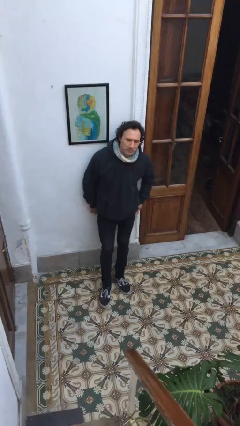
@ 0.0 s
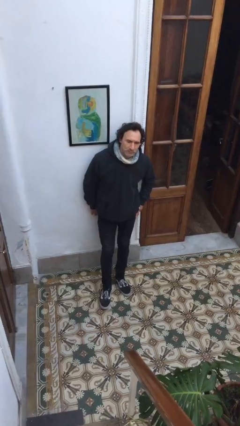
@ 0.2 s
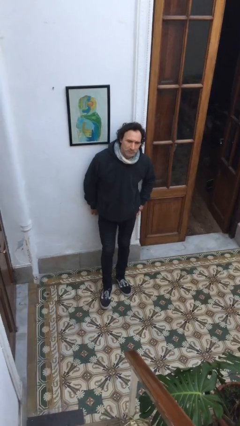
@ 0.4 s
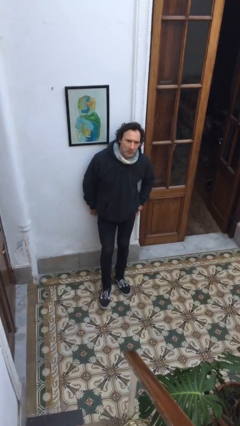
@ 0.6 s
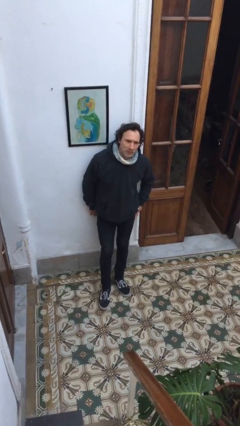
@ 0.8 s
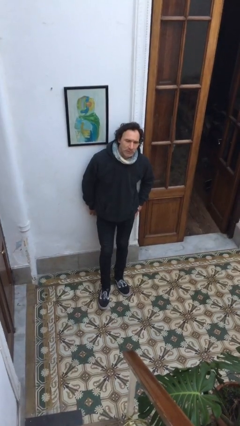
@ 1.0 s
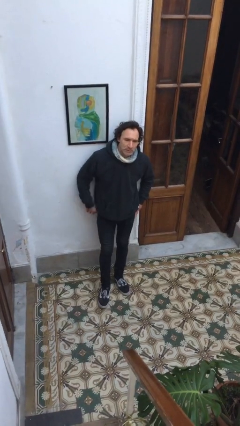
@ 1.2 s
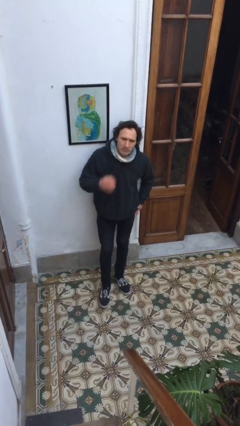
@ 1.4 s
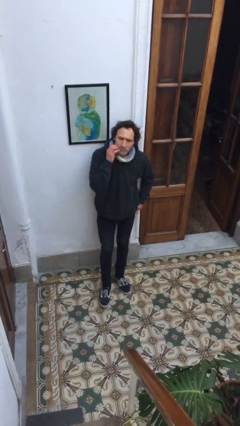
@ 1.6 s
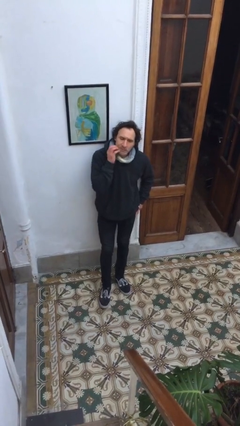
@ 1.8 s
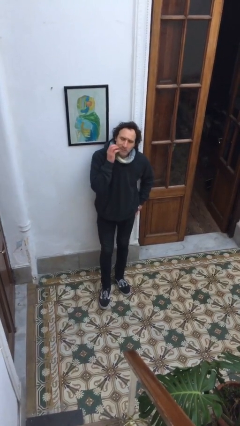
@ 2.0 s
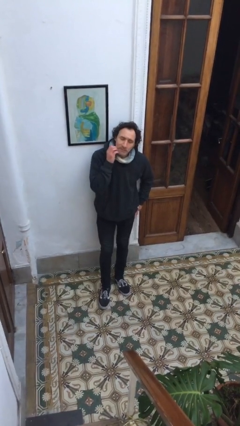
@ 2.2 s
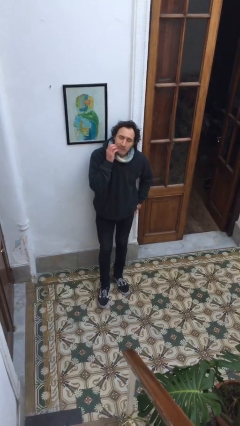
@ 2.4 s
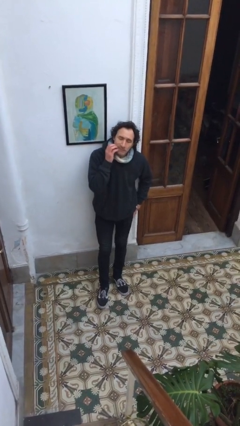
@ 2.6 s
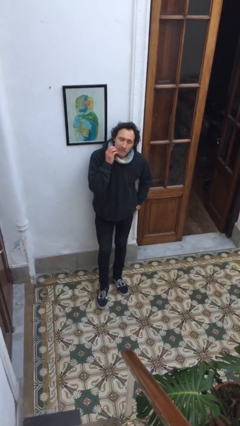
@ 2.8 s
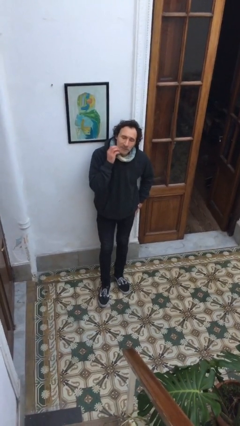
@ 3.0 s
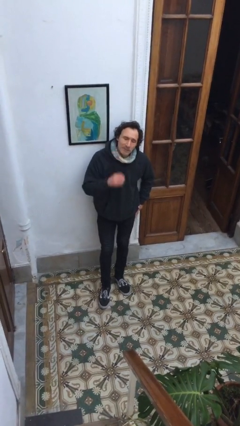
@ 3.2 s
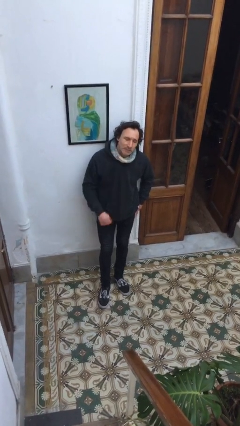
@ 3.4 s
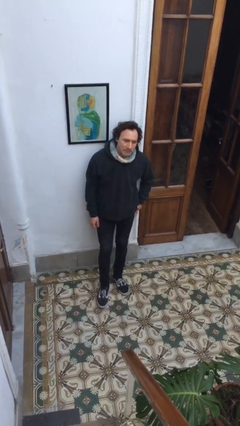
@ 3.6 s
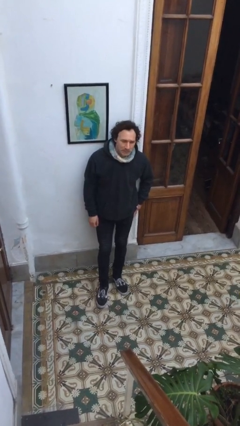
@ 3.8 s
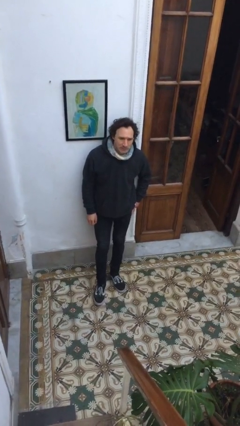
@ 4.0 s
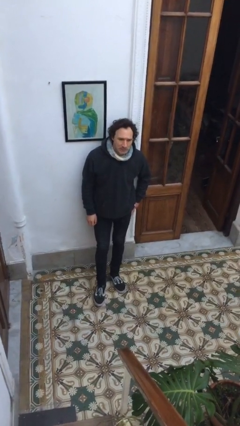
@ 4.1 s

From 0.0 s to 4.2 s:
person scratches face

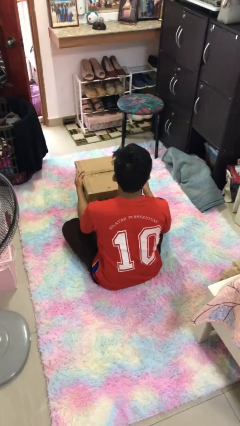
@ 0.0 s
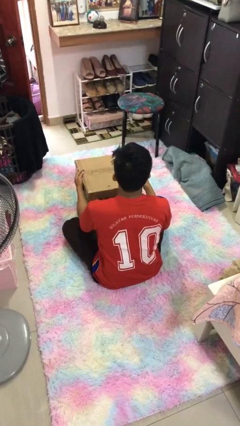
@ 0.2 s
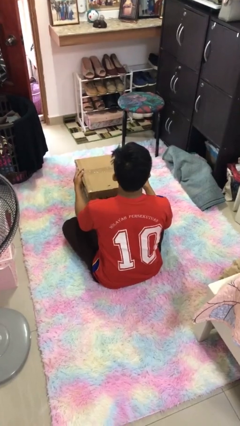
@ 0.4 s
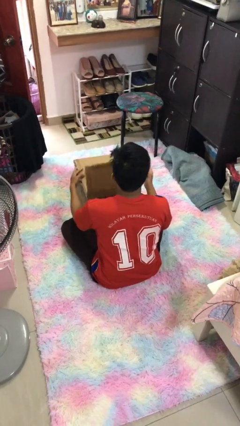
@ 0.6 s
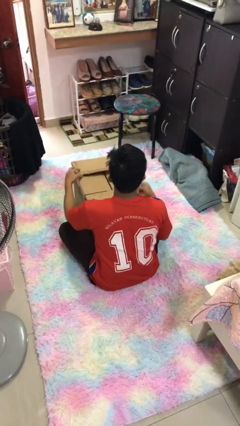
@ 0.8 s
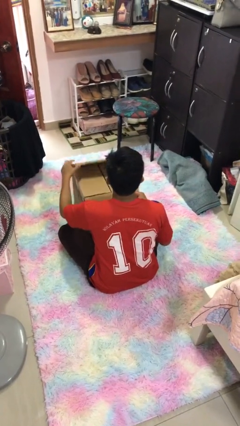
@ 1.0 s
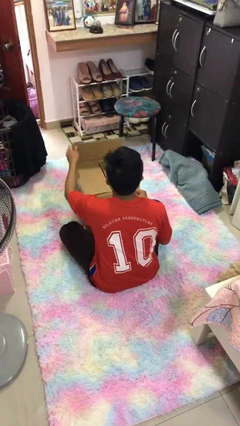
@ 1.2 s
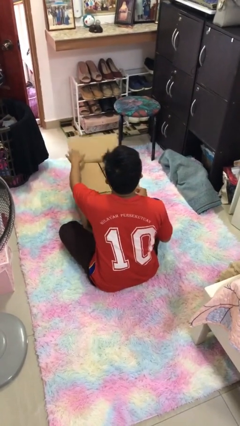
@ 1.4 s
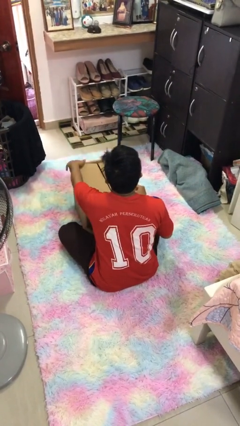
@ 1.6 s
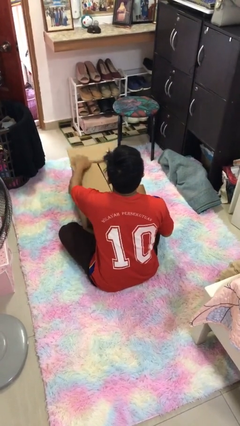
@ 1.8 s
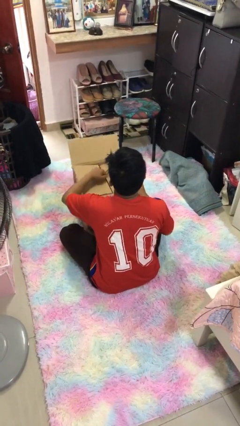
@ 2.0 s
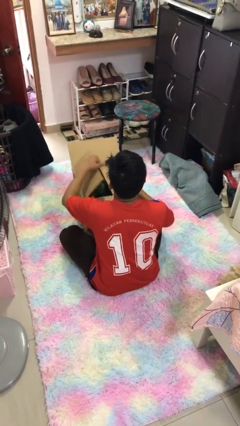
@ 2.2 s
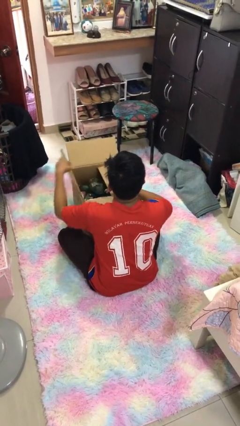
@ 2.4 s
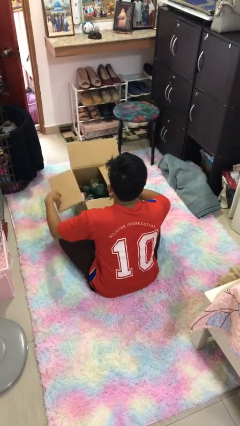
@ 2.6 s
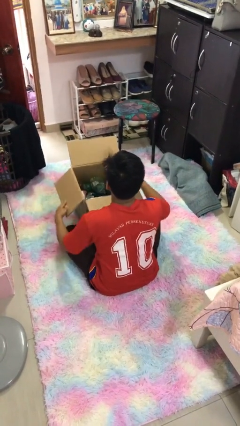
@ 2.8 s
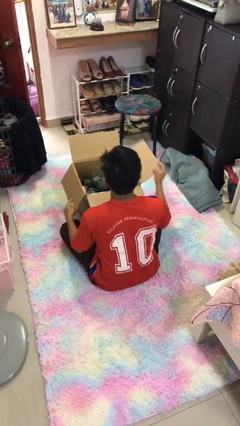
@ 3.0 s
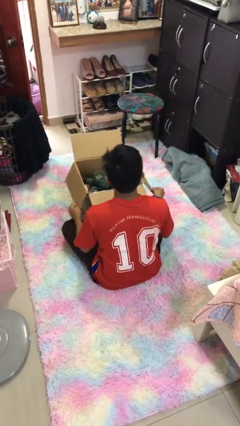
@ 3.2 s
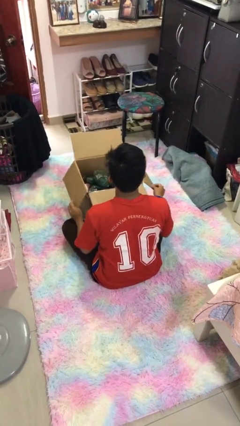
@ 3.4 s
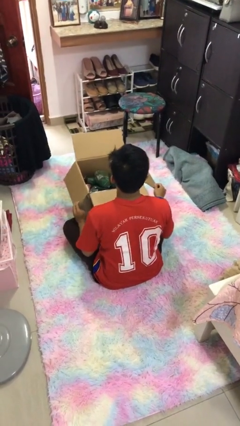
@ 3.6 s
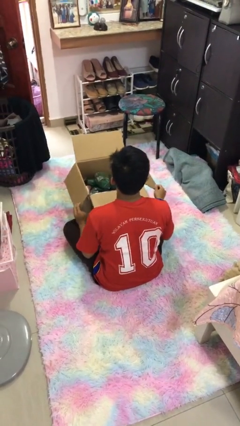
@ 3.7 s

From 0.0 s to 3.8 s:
person opens box

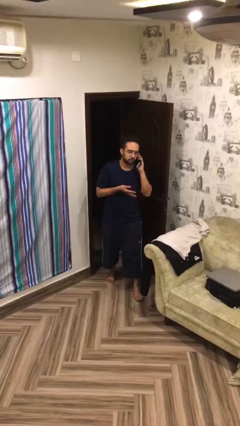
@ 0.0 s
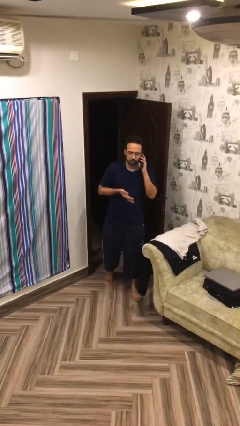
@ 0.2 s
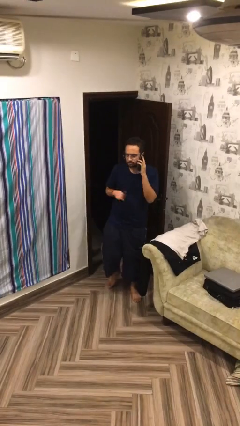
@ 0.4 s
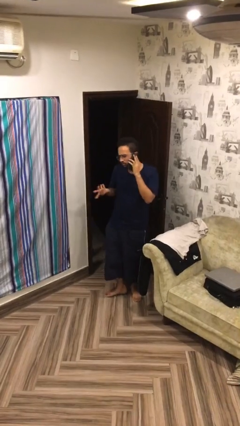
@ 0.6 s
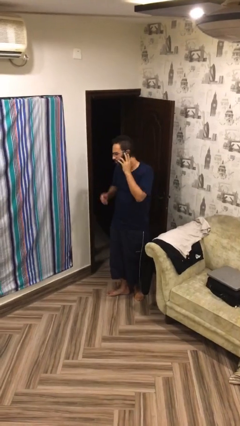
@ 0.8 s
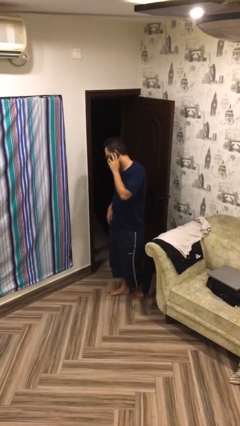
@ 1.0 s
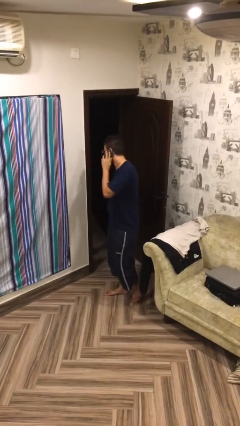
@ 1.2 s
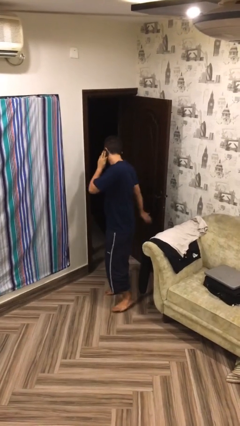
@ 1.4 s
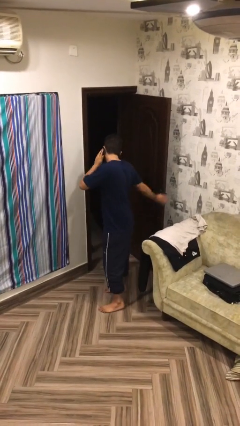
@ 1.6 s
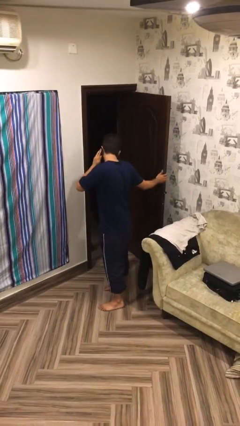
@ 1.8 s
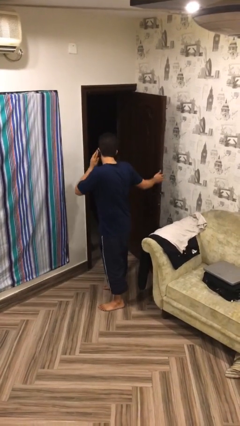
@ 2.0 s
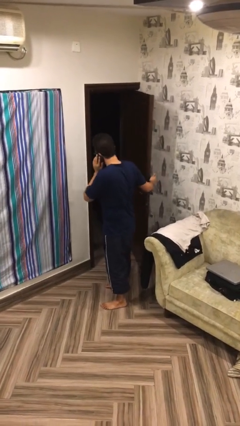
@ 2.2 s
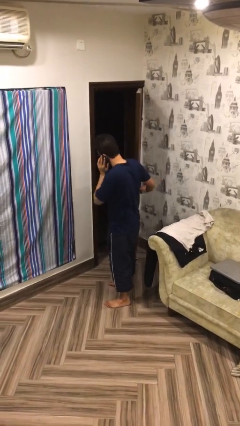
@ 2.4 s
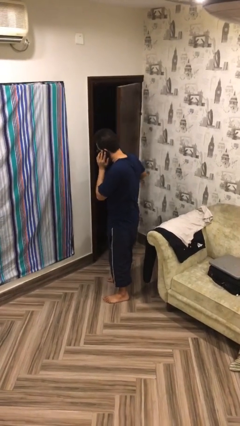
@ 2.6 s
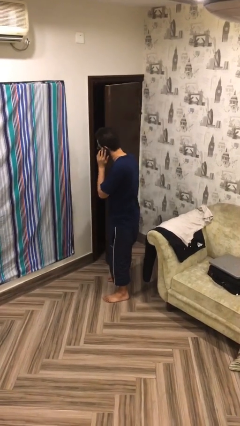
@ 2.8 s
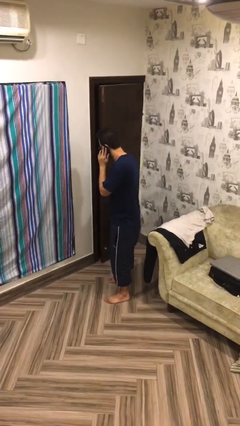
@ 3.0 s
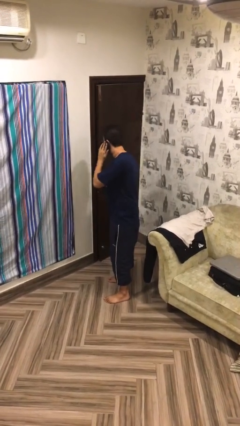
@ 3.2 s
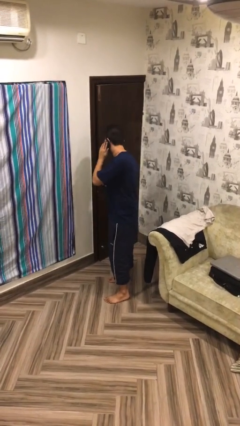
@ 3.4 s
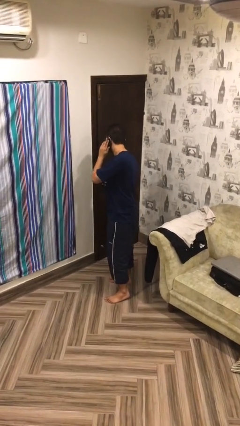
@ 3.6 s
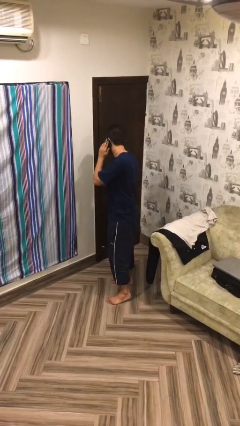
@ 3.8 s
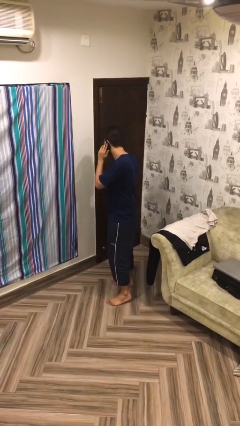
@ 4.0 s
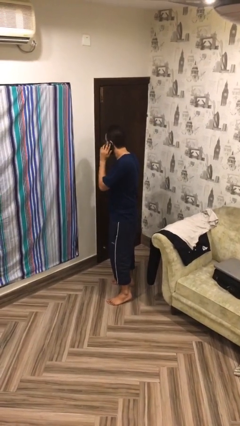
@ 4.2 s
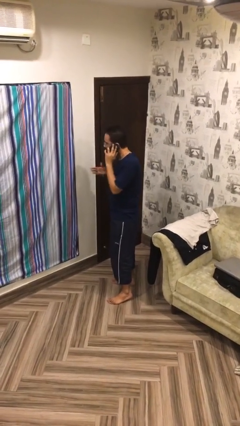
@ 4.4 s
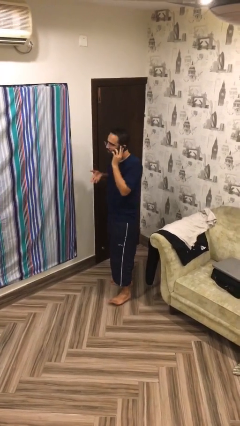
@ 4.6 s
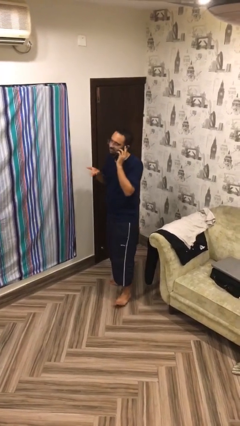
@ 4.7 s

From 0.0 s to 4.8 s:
person closes facility door

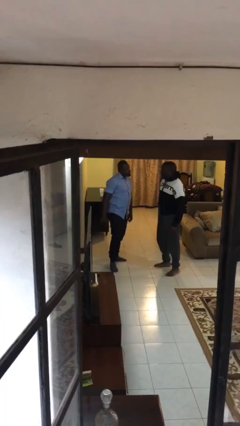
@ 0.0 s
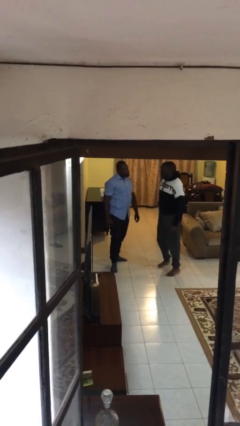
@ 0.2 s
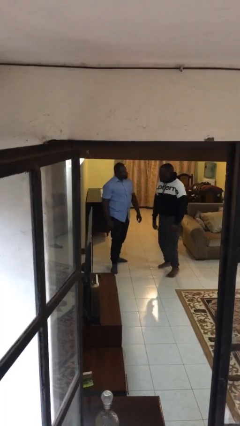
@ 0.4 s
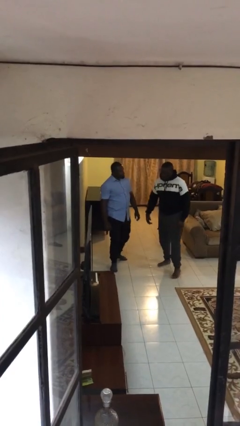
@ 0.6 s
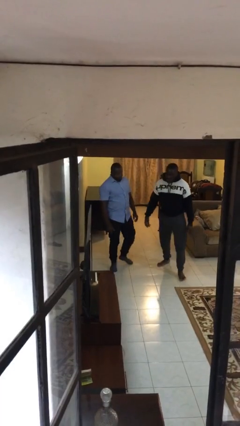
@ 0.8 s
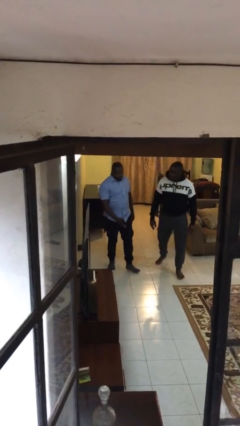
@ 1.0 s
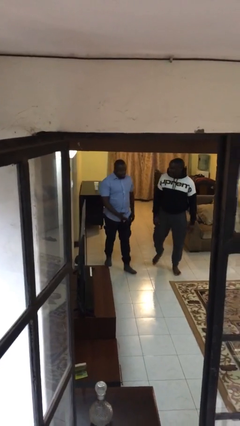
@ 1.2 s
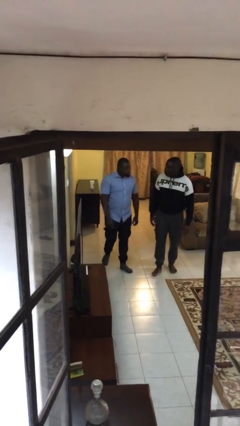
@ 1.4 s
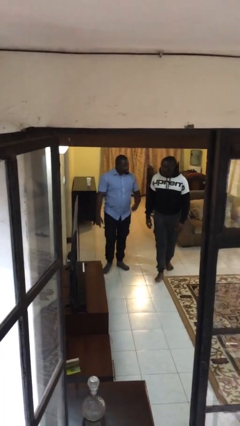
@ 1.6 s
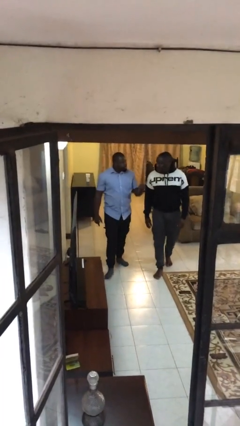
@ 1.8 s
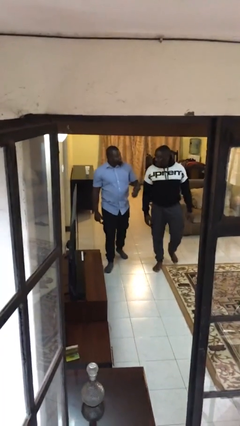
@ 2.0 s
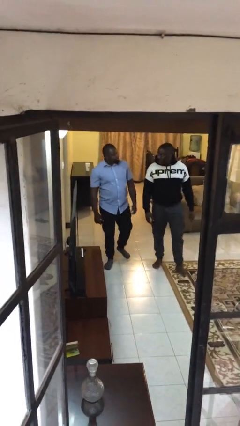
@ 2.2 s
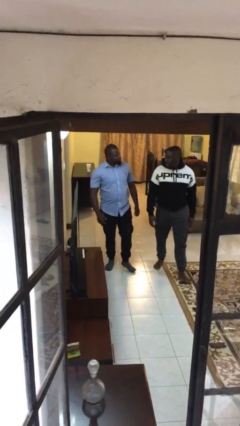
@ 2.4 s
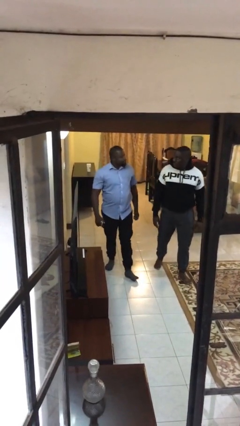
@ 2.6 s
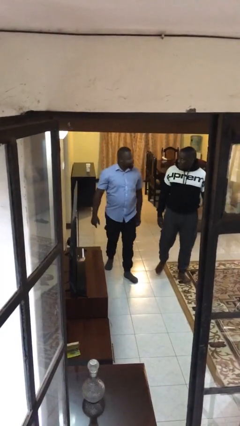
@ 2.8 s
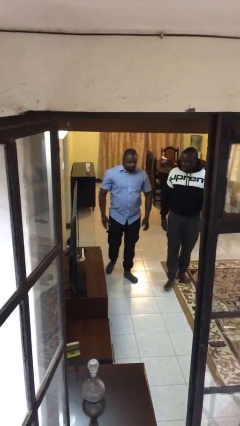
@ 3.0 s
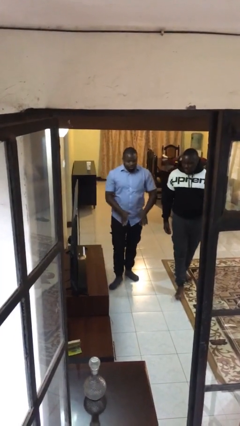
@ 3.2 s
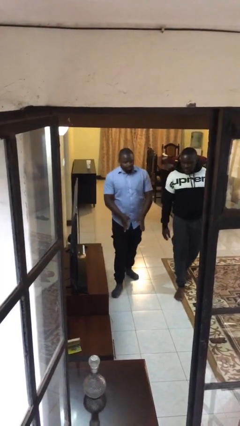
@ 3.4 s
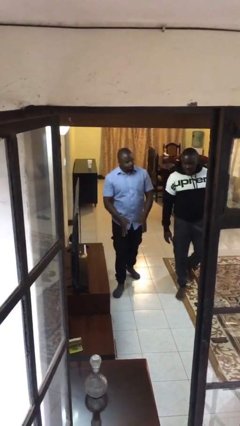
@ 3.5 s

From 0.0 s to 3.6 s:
person talks to person

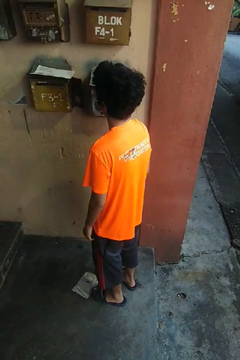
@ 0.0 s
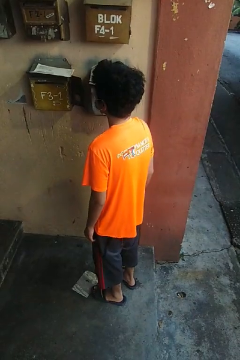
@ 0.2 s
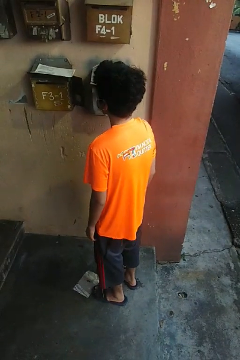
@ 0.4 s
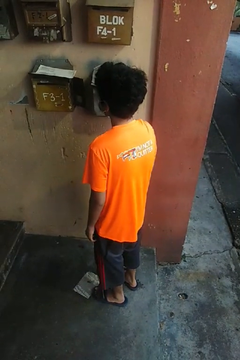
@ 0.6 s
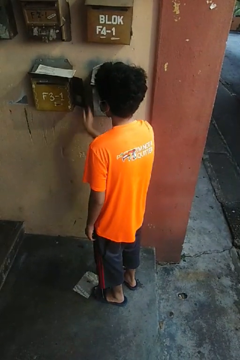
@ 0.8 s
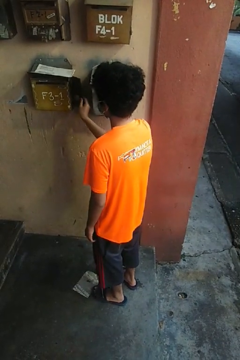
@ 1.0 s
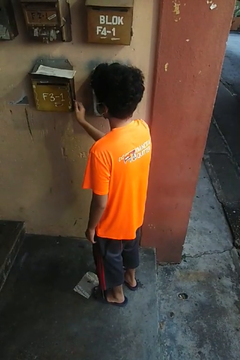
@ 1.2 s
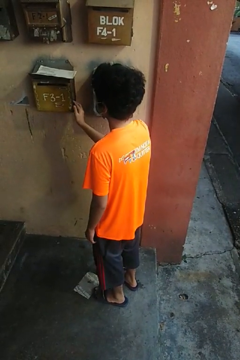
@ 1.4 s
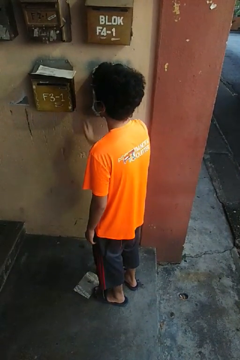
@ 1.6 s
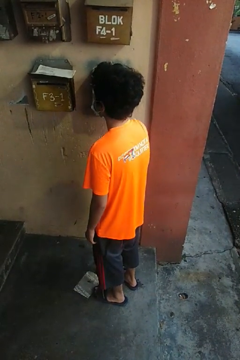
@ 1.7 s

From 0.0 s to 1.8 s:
person closes mailbox
